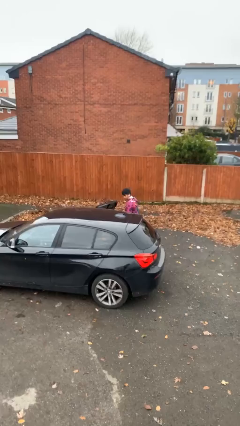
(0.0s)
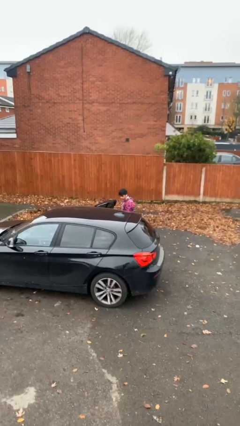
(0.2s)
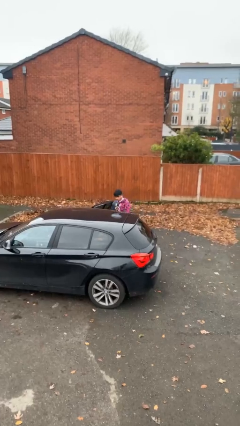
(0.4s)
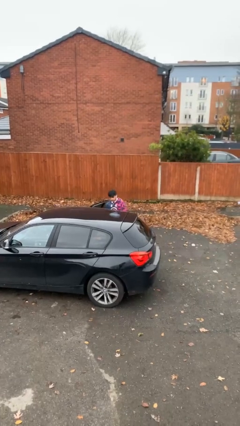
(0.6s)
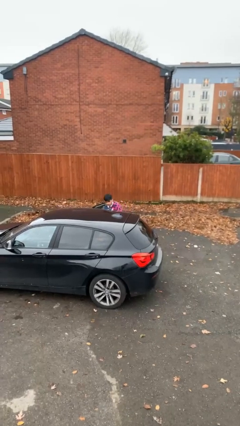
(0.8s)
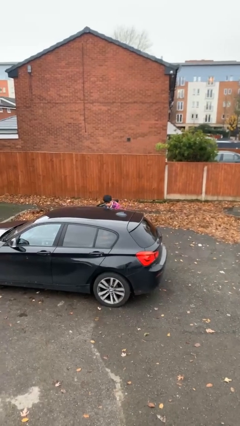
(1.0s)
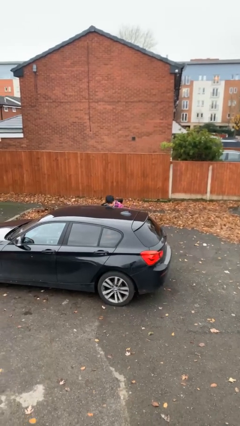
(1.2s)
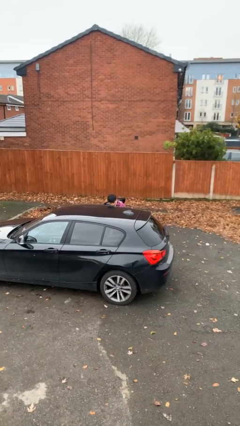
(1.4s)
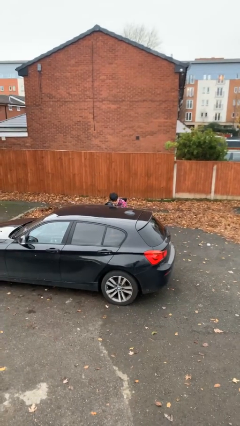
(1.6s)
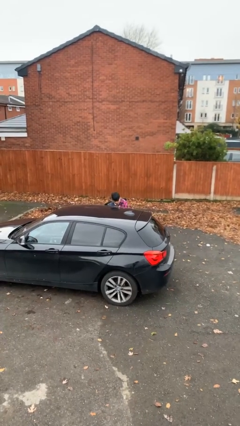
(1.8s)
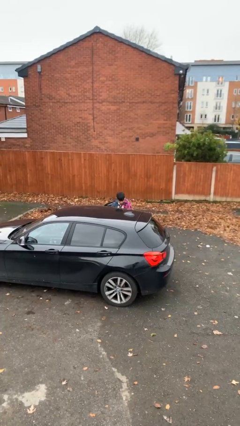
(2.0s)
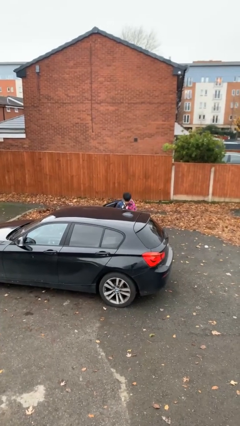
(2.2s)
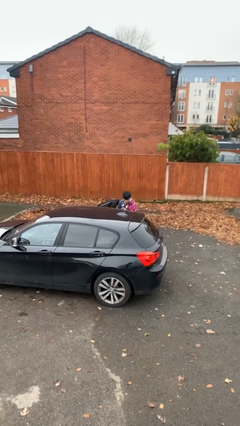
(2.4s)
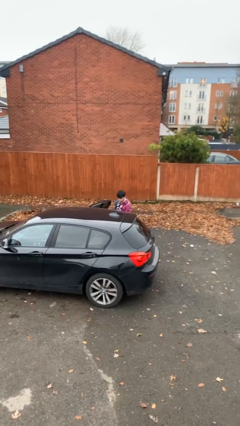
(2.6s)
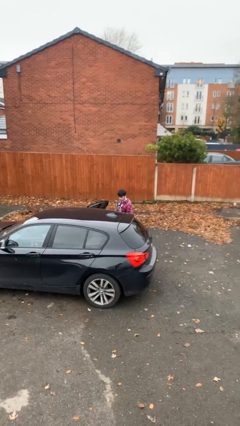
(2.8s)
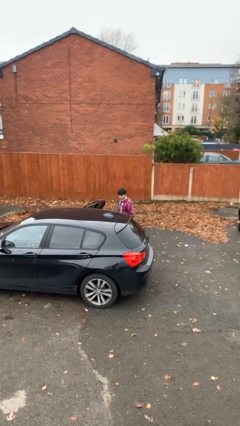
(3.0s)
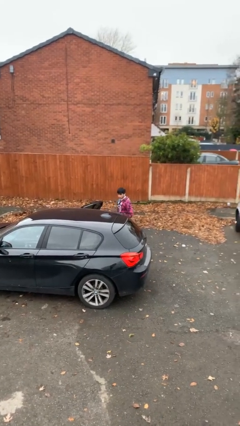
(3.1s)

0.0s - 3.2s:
person unloads car

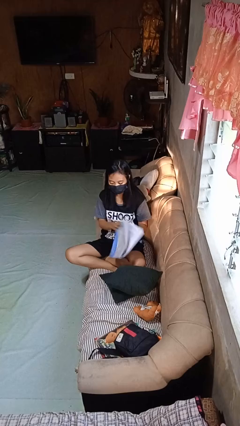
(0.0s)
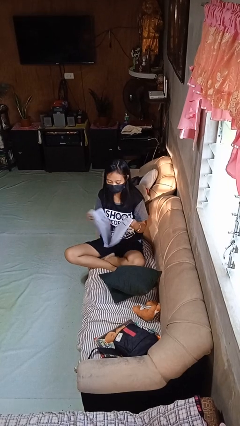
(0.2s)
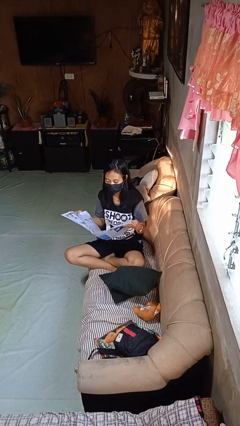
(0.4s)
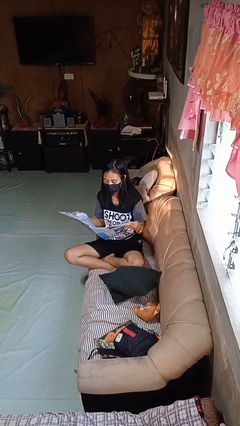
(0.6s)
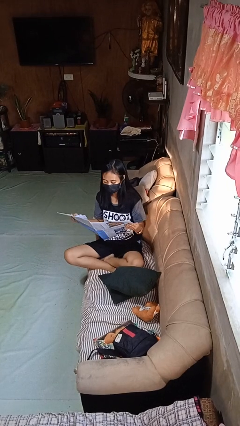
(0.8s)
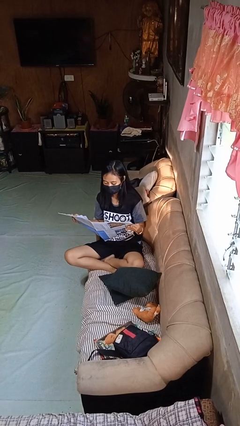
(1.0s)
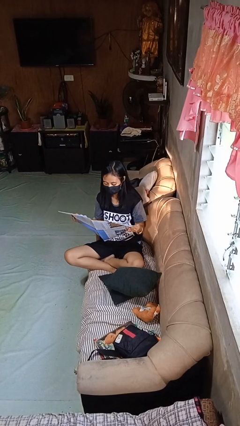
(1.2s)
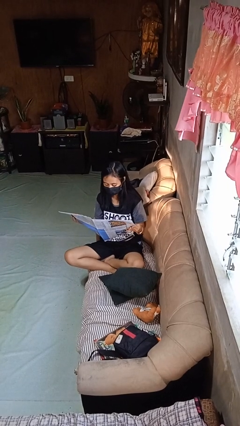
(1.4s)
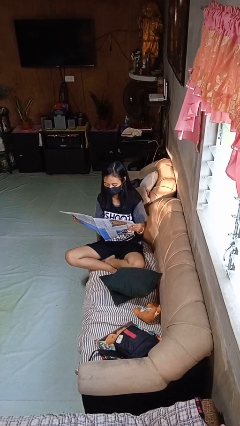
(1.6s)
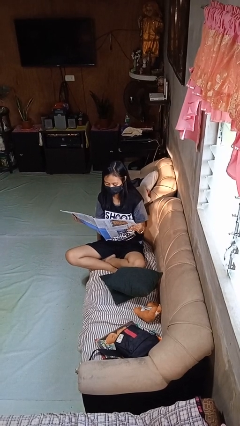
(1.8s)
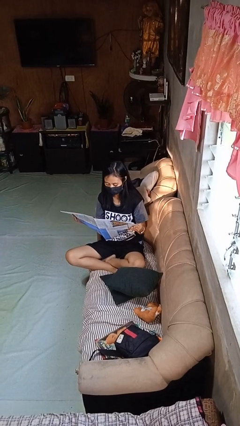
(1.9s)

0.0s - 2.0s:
person reads newspaper

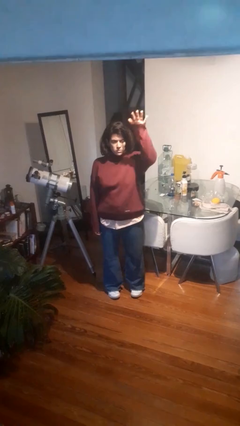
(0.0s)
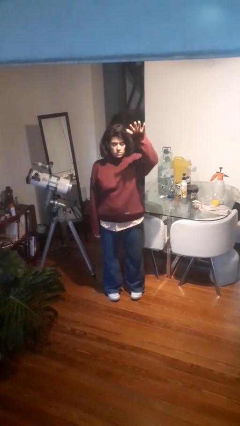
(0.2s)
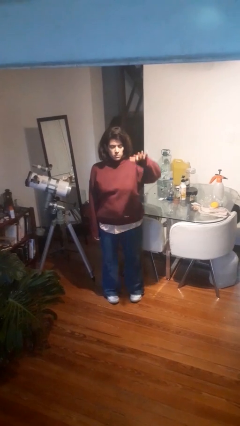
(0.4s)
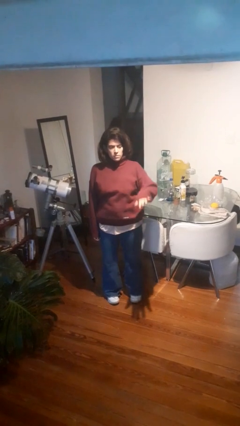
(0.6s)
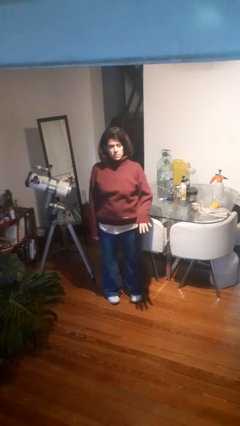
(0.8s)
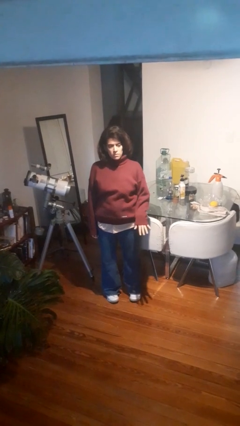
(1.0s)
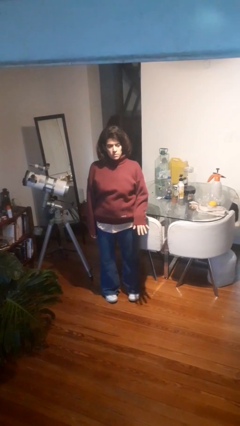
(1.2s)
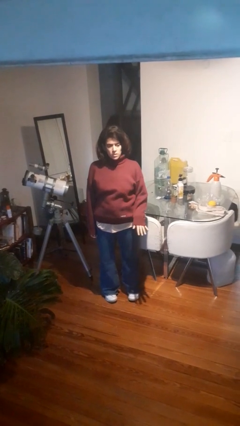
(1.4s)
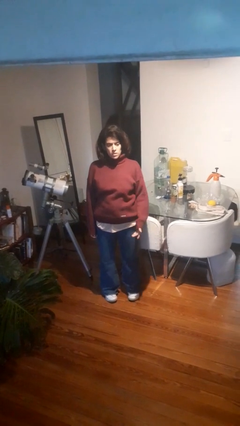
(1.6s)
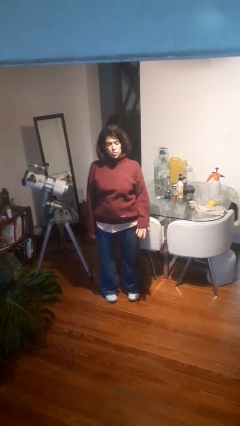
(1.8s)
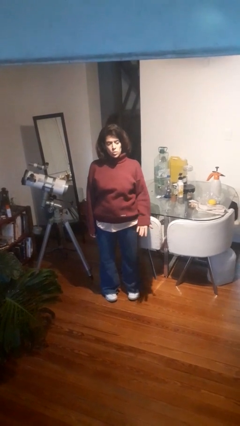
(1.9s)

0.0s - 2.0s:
person gestures swipe down

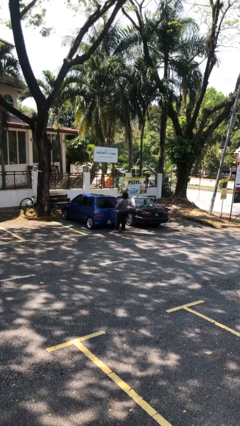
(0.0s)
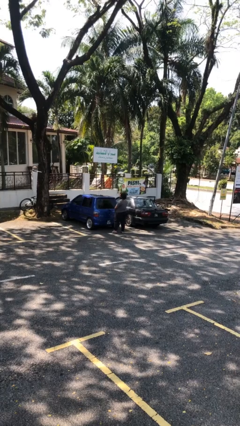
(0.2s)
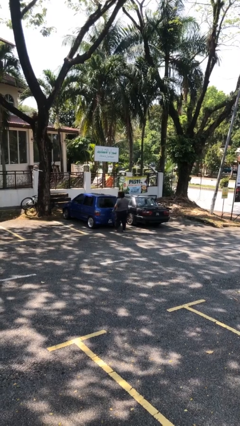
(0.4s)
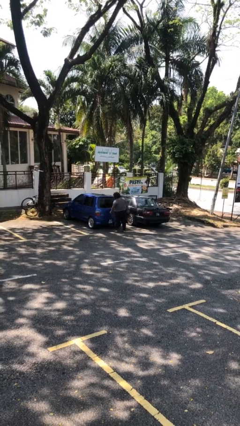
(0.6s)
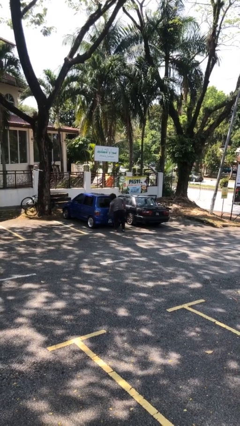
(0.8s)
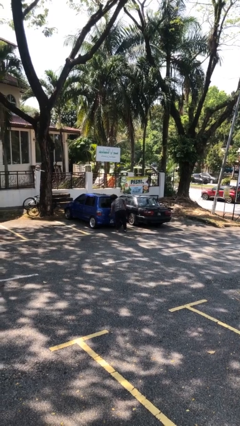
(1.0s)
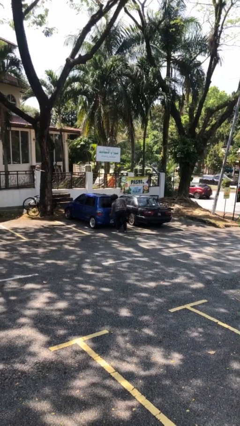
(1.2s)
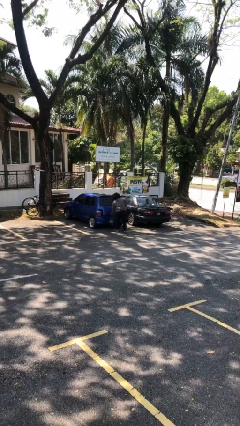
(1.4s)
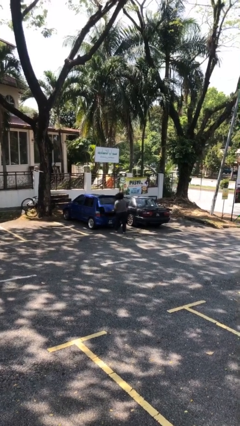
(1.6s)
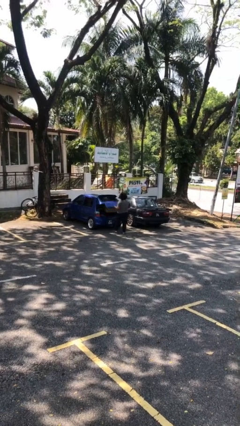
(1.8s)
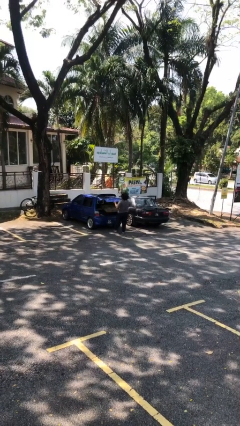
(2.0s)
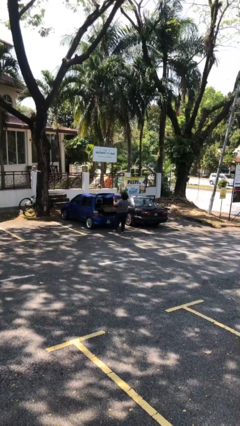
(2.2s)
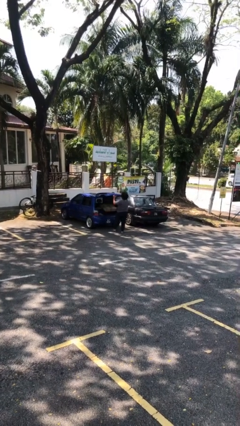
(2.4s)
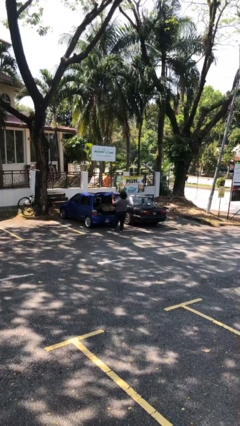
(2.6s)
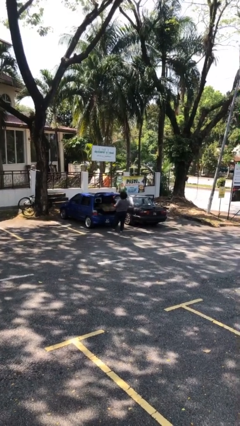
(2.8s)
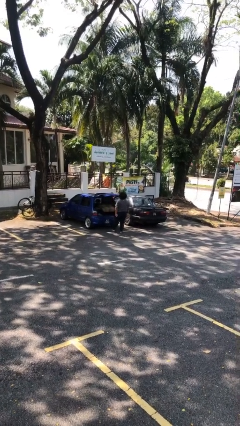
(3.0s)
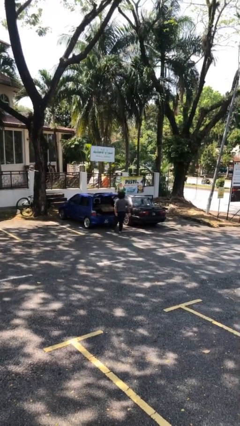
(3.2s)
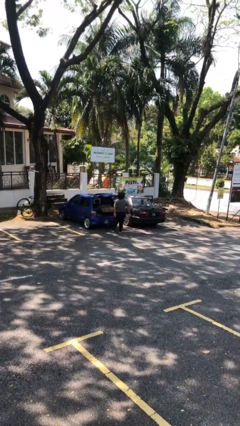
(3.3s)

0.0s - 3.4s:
person opens car trunk

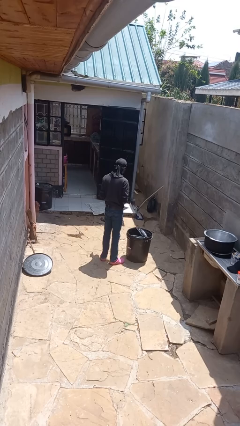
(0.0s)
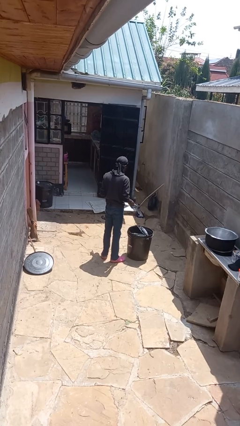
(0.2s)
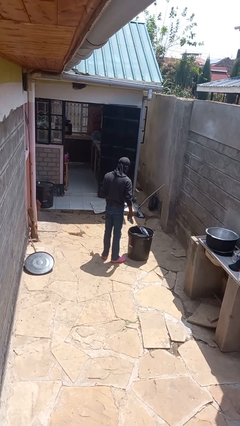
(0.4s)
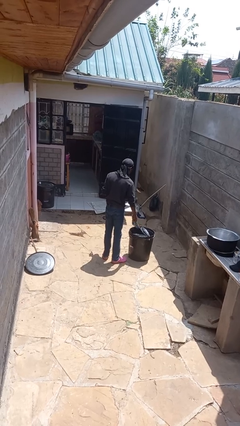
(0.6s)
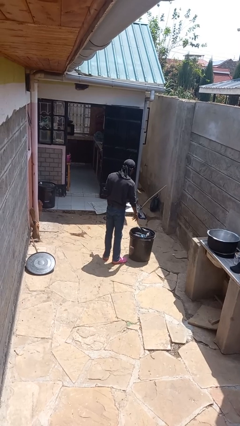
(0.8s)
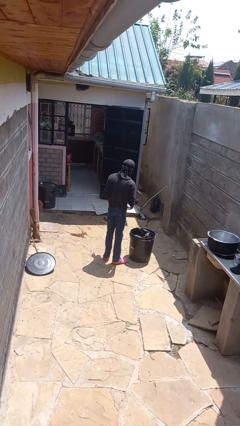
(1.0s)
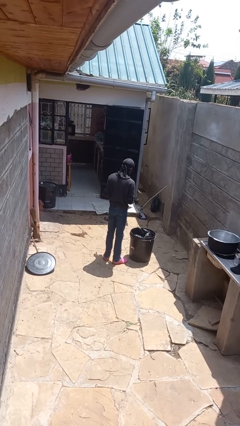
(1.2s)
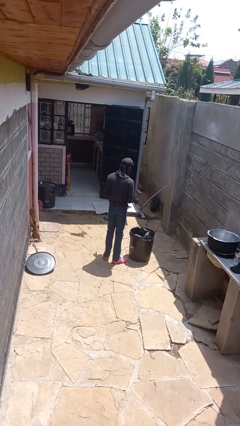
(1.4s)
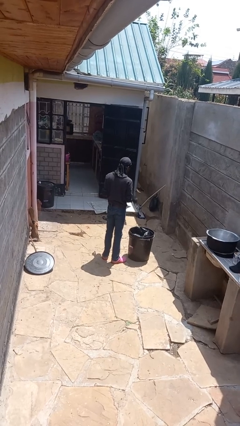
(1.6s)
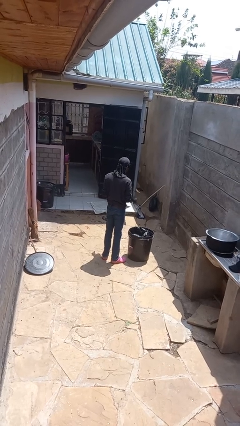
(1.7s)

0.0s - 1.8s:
person discards trash

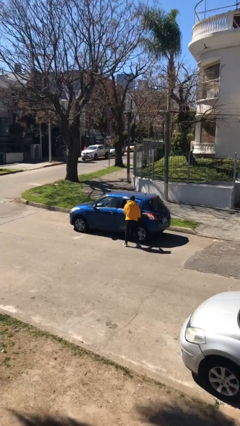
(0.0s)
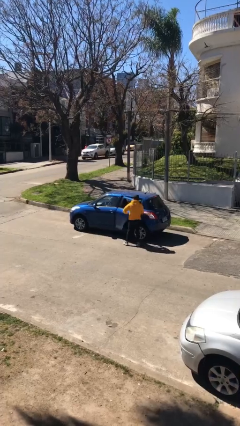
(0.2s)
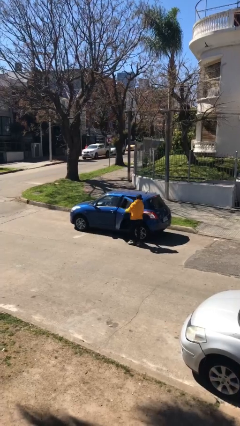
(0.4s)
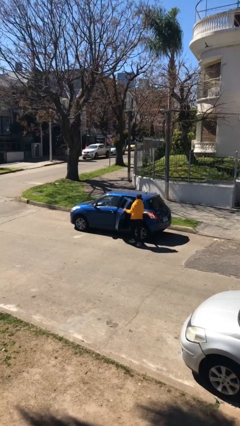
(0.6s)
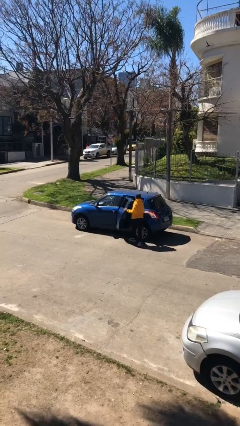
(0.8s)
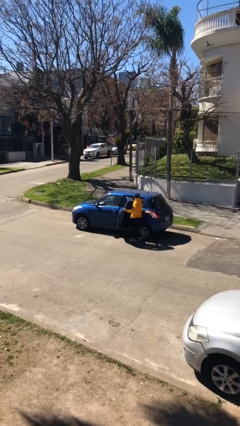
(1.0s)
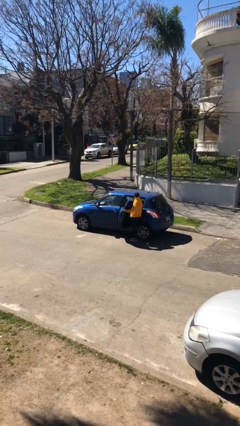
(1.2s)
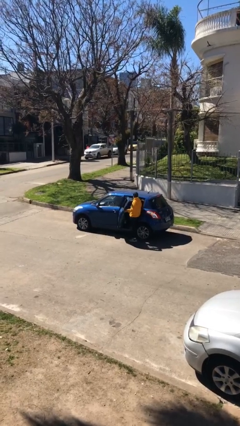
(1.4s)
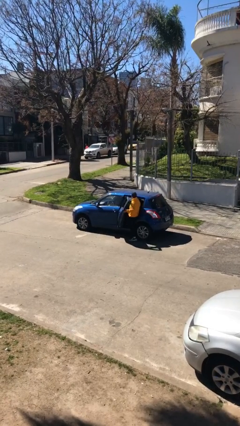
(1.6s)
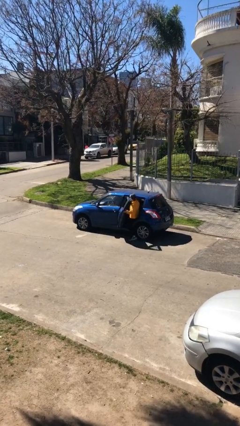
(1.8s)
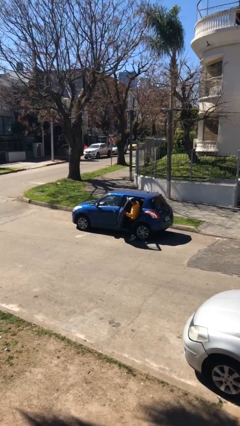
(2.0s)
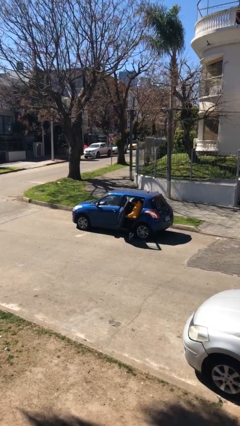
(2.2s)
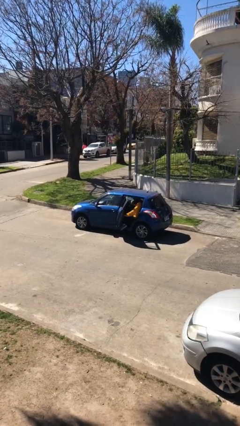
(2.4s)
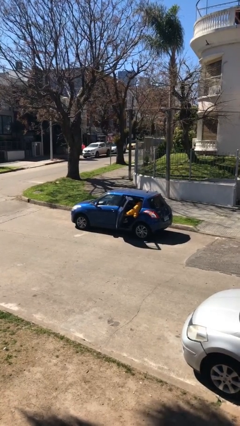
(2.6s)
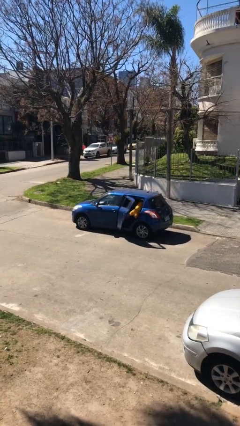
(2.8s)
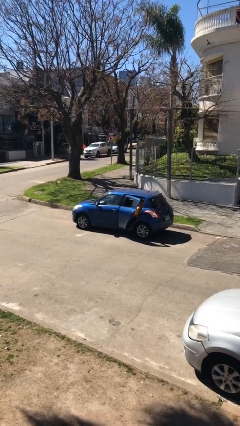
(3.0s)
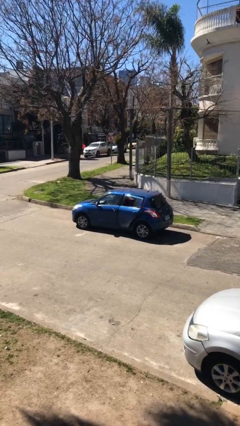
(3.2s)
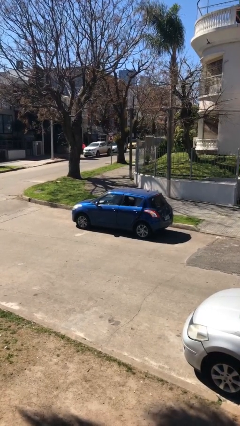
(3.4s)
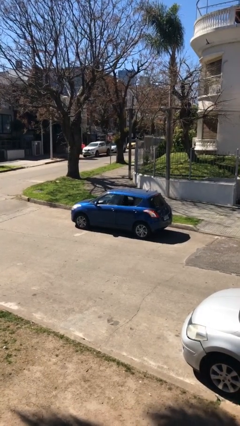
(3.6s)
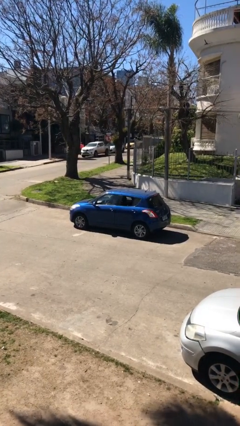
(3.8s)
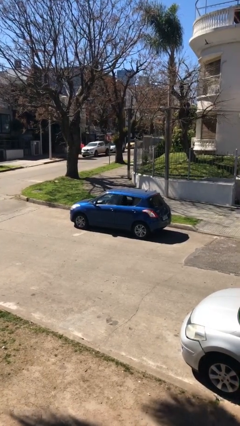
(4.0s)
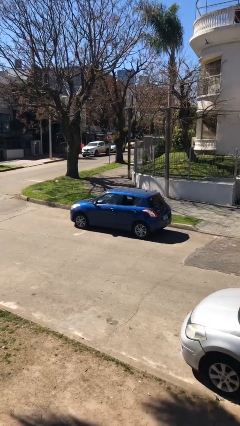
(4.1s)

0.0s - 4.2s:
car picks up person

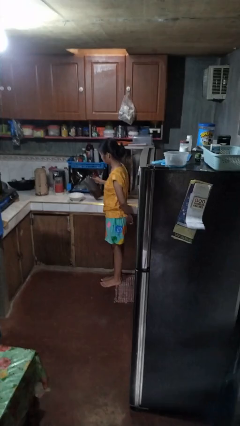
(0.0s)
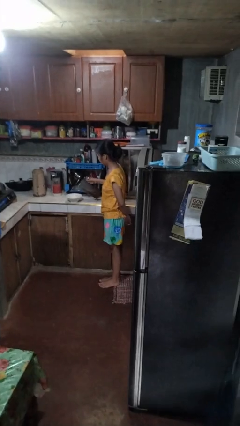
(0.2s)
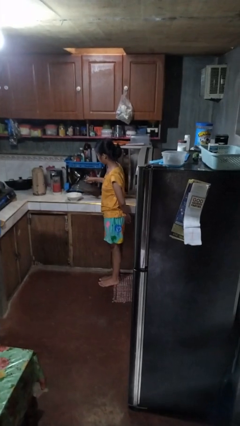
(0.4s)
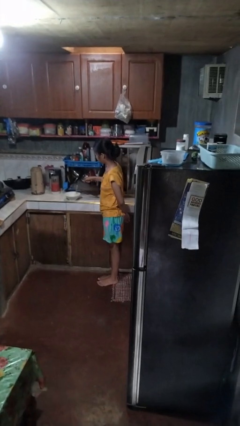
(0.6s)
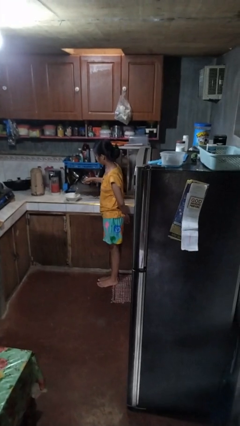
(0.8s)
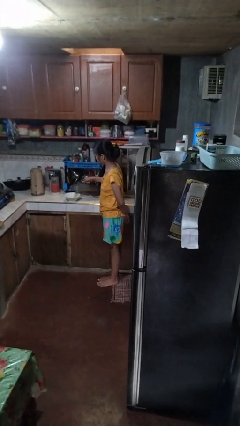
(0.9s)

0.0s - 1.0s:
person pours into bowl
